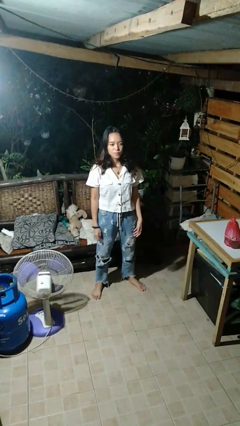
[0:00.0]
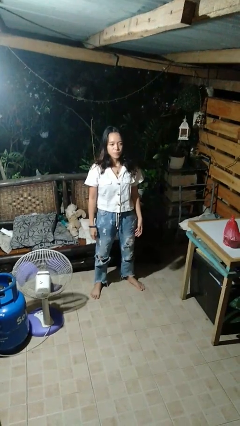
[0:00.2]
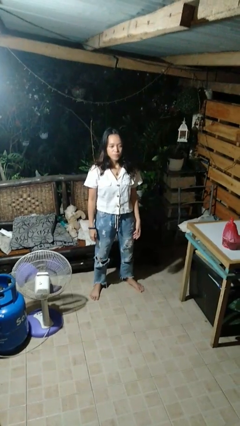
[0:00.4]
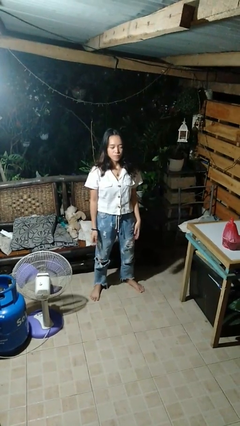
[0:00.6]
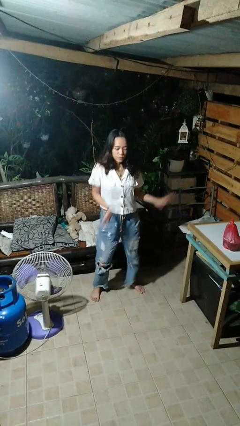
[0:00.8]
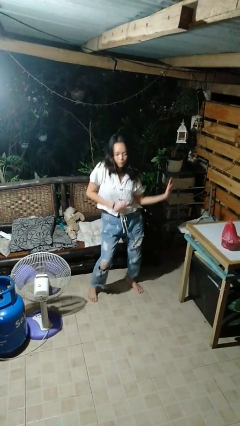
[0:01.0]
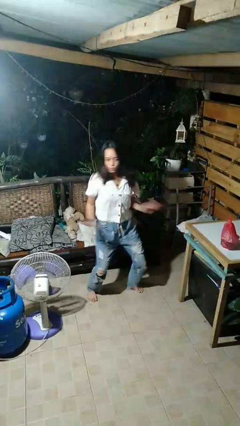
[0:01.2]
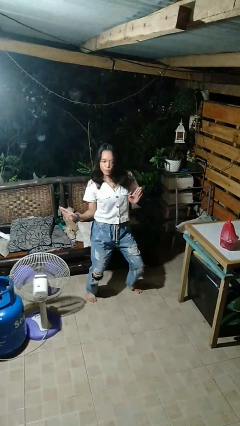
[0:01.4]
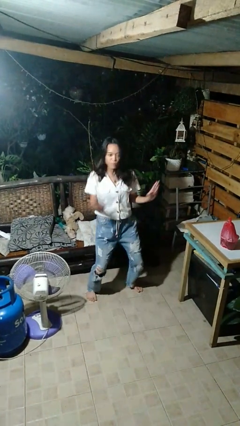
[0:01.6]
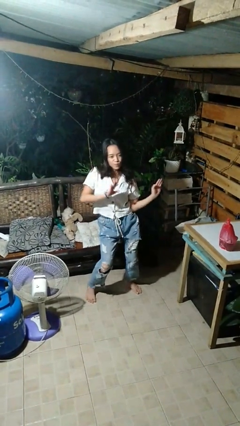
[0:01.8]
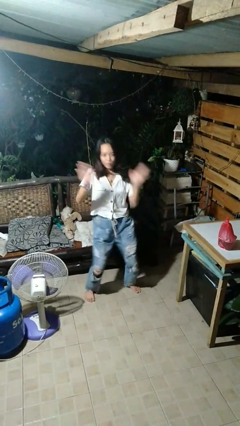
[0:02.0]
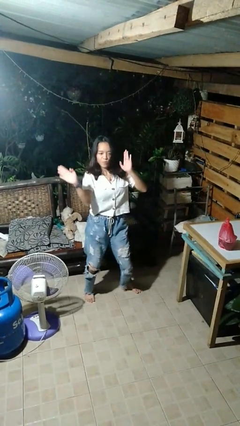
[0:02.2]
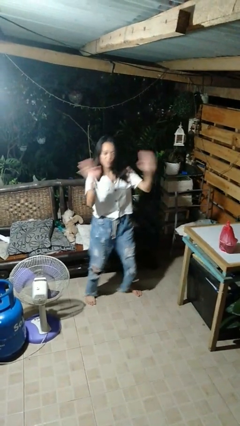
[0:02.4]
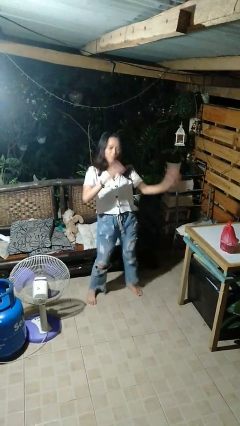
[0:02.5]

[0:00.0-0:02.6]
person dances in place

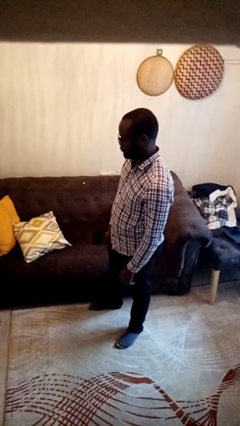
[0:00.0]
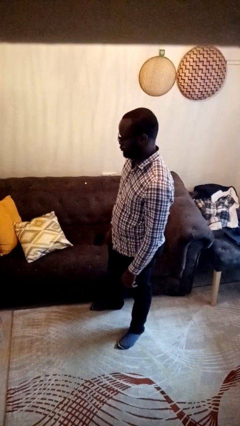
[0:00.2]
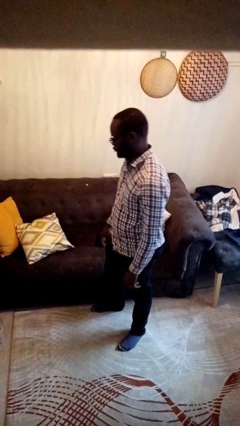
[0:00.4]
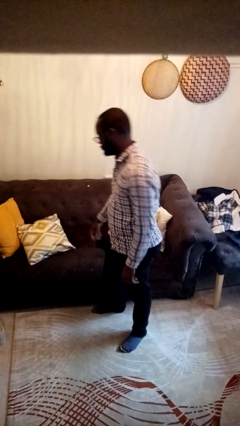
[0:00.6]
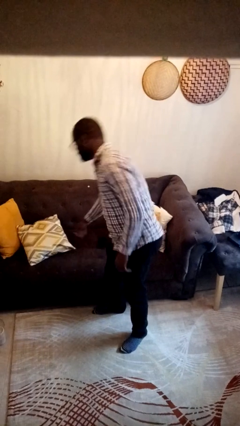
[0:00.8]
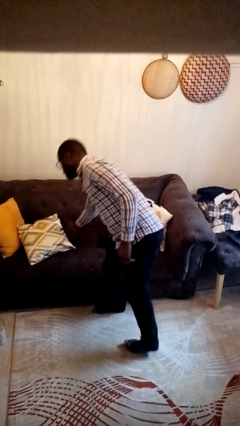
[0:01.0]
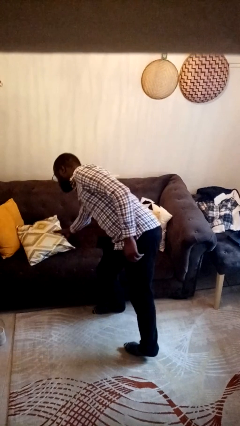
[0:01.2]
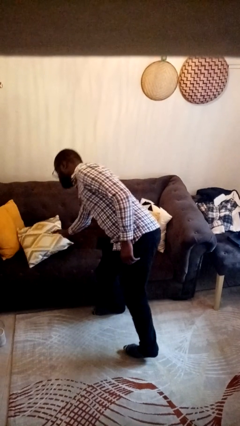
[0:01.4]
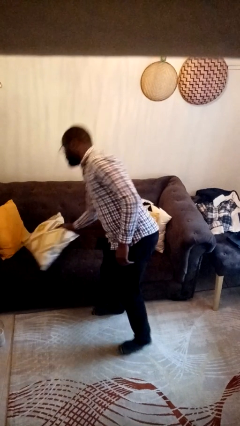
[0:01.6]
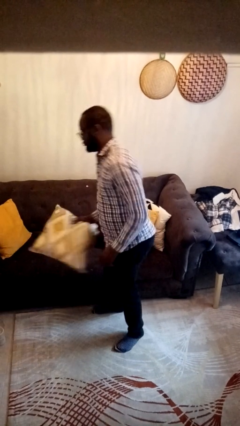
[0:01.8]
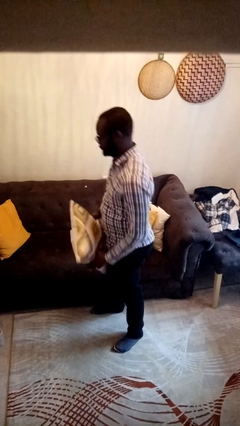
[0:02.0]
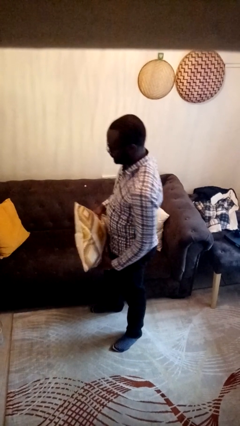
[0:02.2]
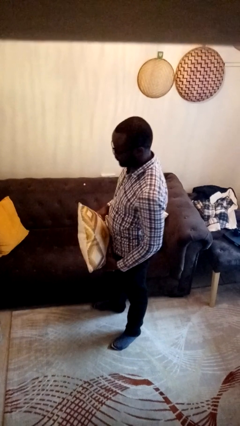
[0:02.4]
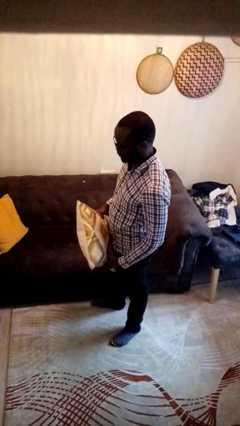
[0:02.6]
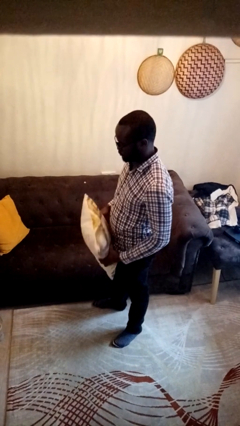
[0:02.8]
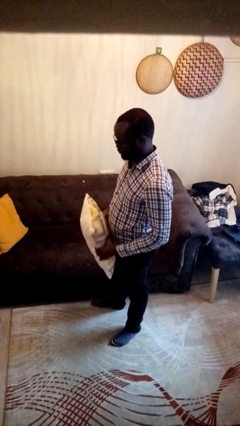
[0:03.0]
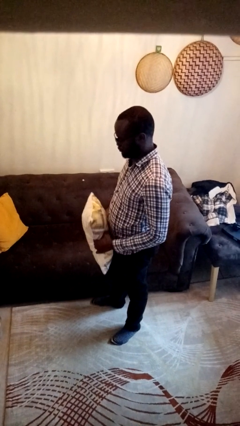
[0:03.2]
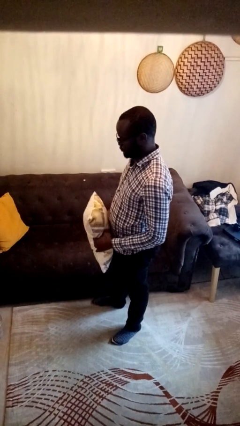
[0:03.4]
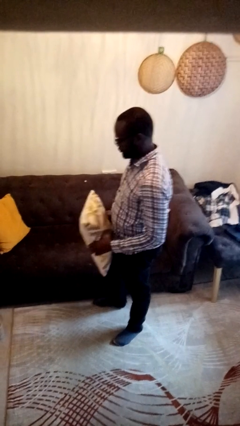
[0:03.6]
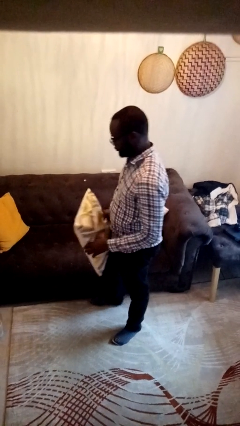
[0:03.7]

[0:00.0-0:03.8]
person picks up object from couch

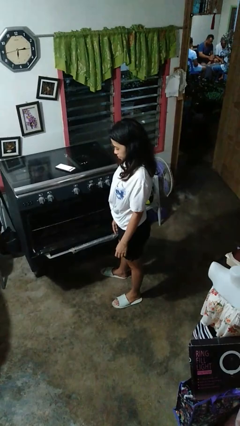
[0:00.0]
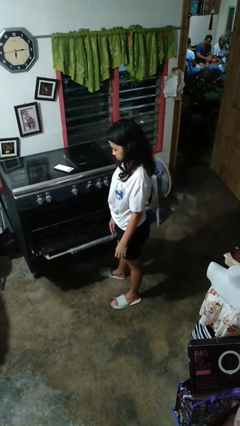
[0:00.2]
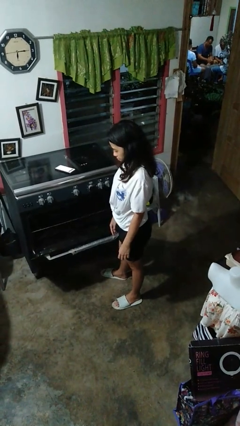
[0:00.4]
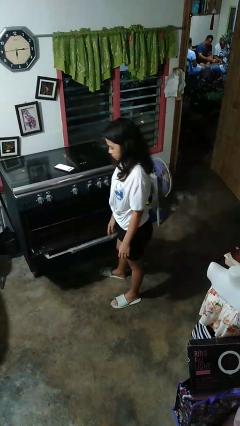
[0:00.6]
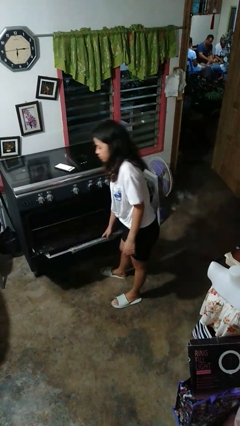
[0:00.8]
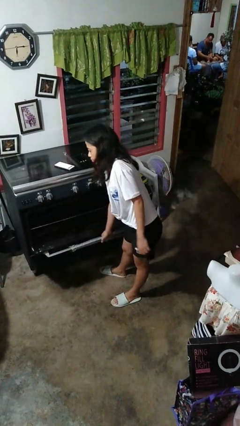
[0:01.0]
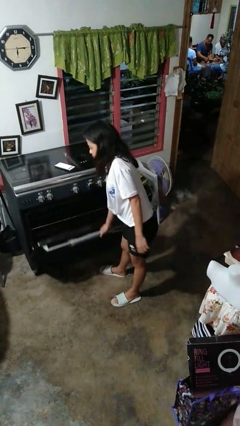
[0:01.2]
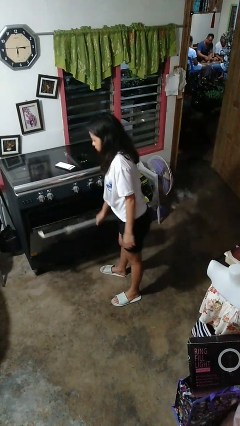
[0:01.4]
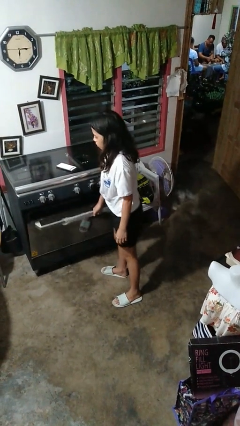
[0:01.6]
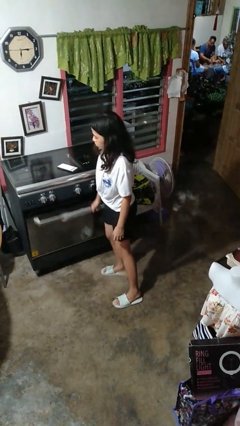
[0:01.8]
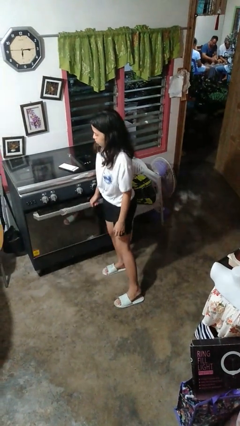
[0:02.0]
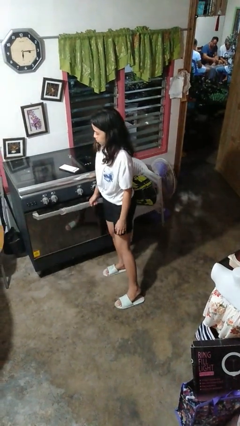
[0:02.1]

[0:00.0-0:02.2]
person closes oven door

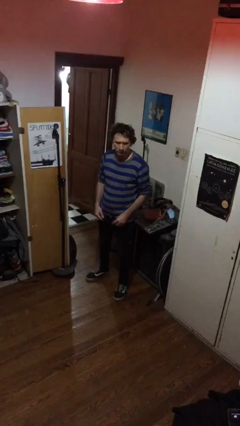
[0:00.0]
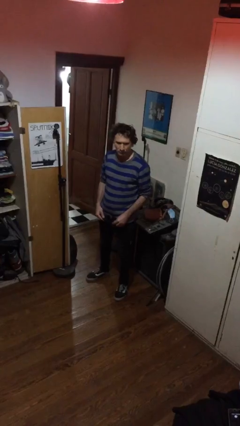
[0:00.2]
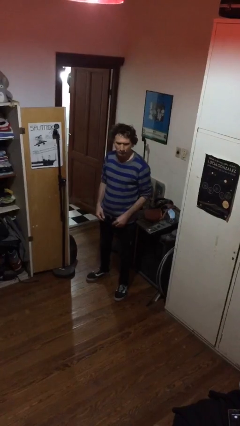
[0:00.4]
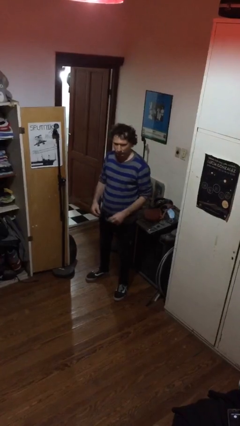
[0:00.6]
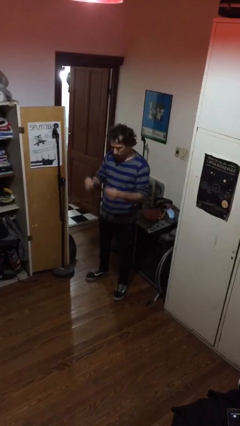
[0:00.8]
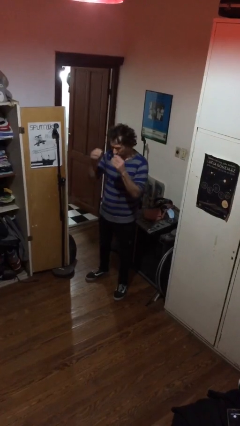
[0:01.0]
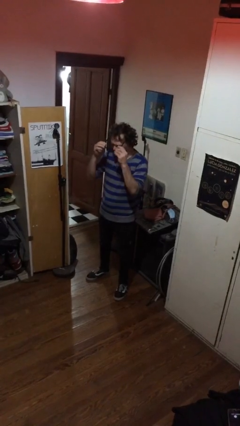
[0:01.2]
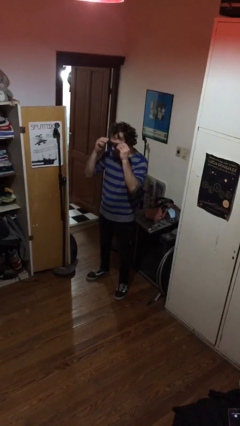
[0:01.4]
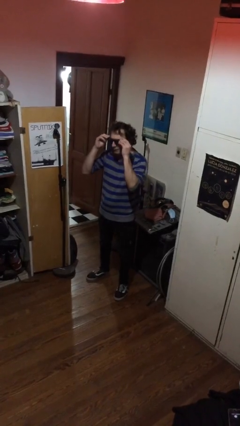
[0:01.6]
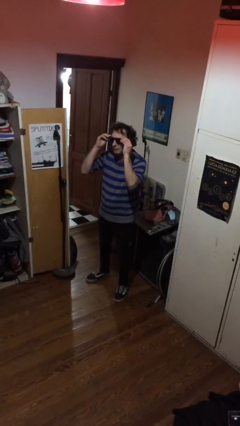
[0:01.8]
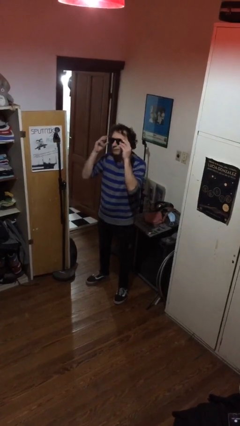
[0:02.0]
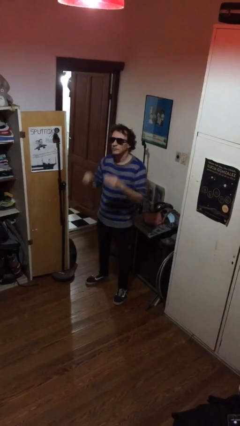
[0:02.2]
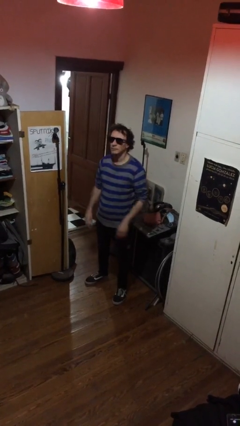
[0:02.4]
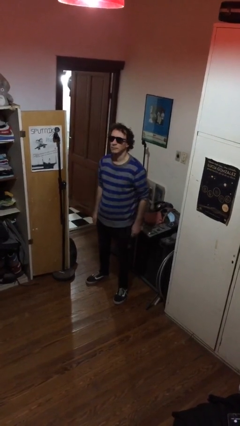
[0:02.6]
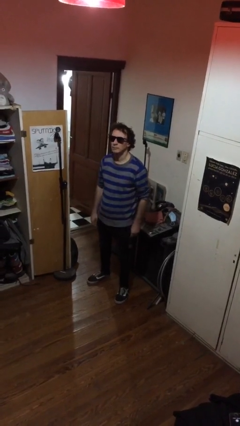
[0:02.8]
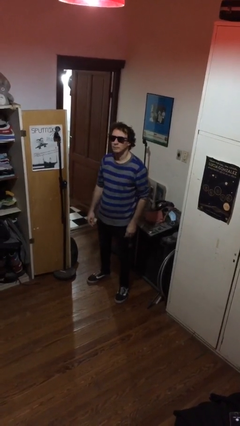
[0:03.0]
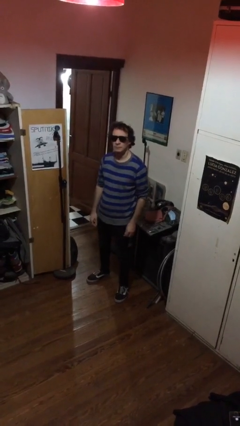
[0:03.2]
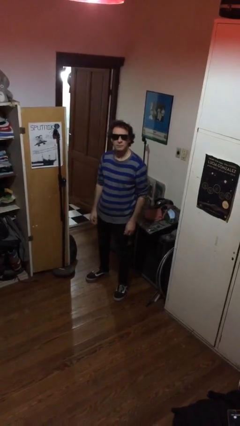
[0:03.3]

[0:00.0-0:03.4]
person puts on sunglasses

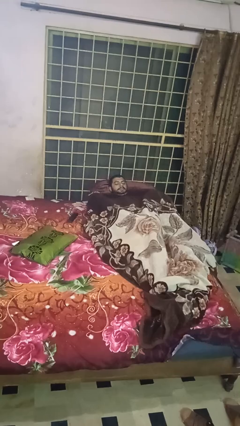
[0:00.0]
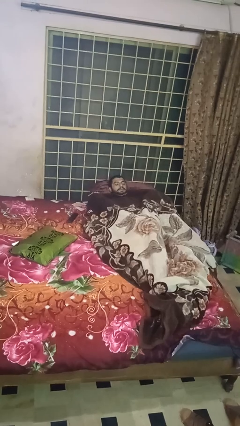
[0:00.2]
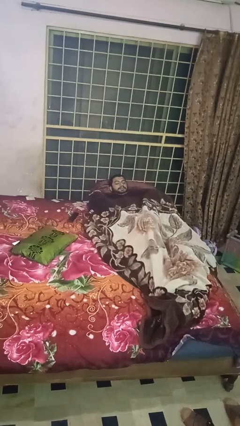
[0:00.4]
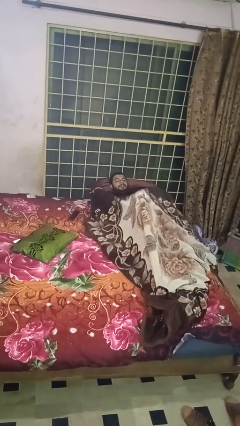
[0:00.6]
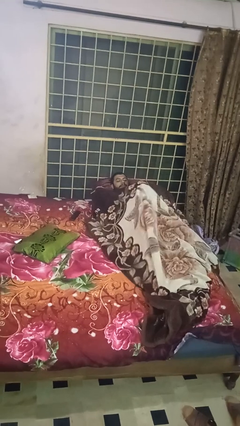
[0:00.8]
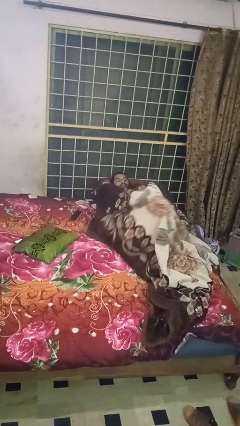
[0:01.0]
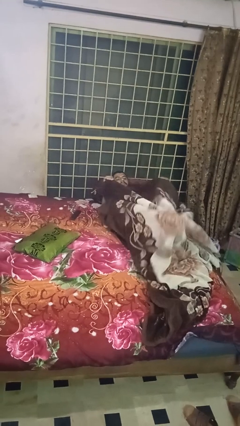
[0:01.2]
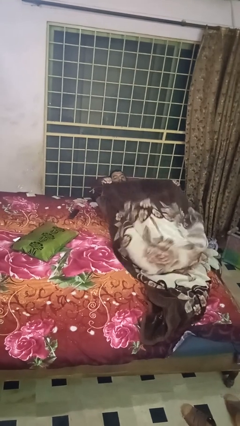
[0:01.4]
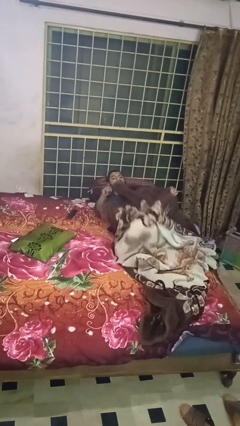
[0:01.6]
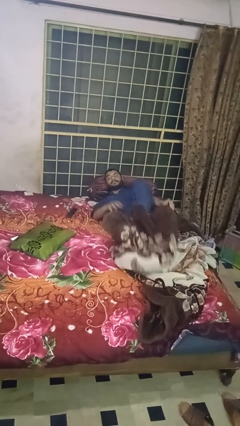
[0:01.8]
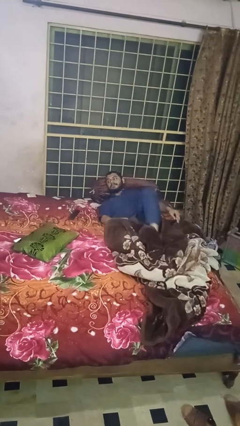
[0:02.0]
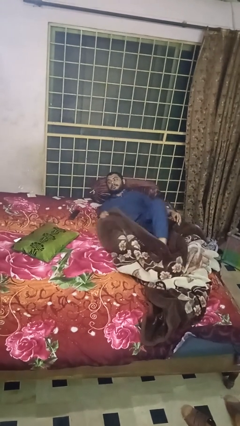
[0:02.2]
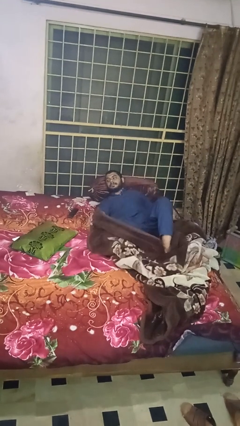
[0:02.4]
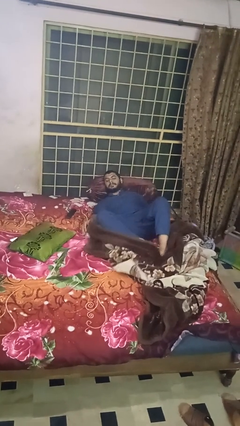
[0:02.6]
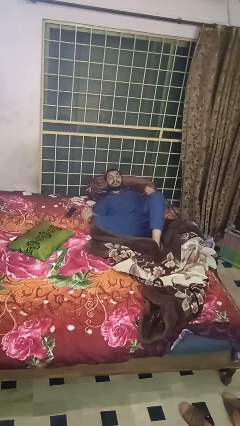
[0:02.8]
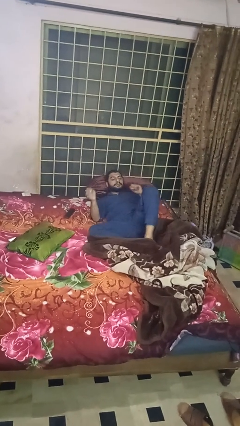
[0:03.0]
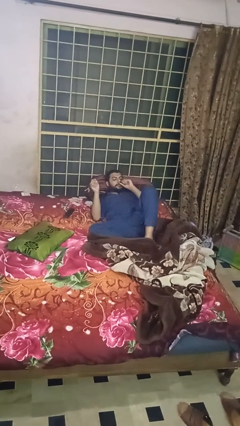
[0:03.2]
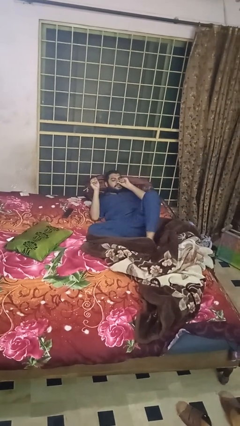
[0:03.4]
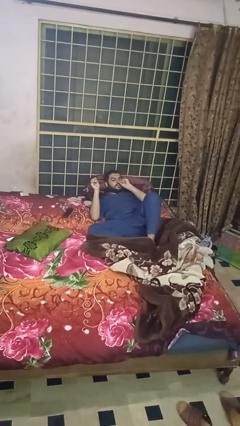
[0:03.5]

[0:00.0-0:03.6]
person uncovers with blanket

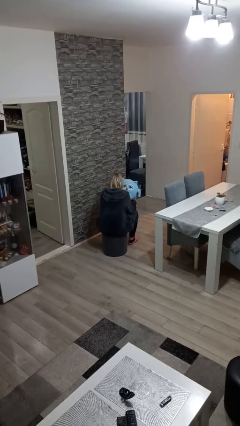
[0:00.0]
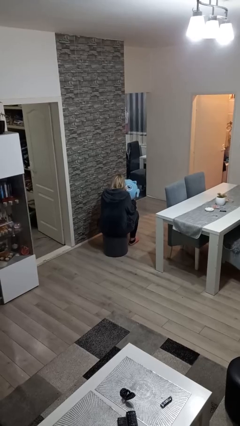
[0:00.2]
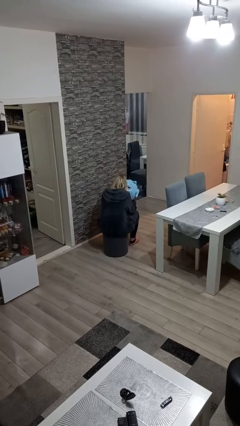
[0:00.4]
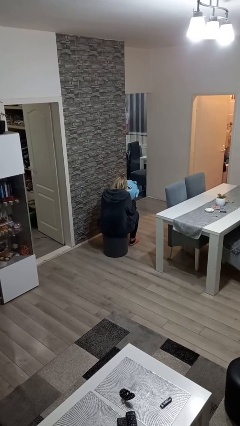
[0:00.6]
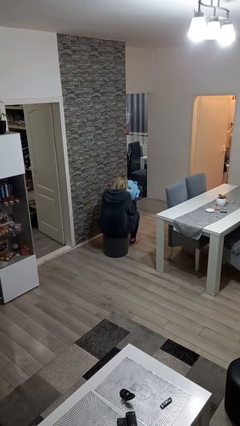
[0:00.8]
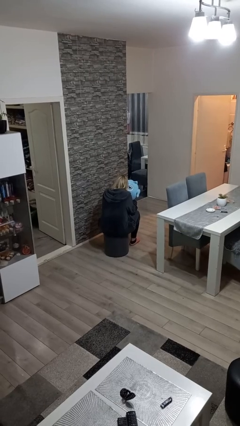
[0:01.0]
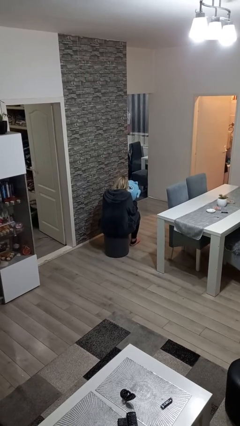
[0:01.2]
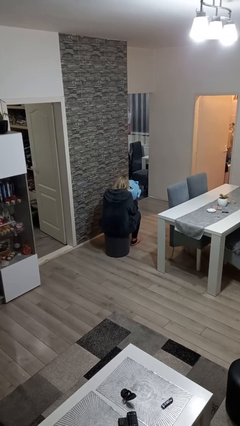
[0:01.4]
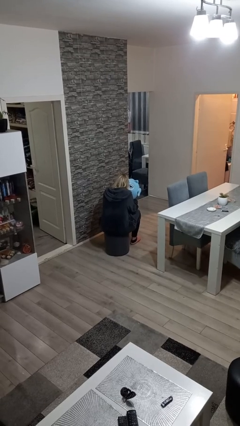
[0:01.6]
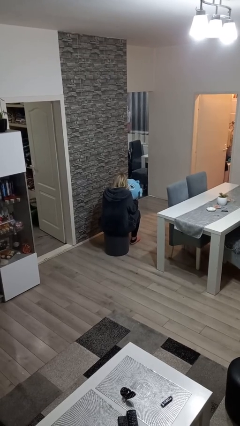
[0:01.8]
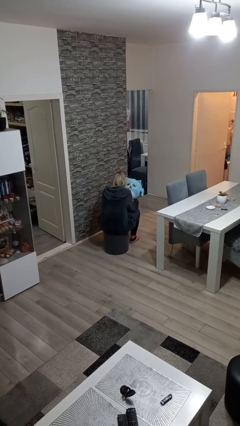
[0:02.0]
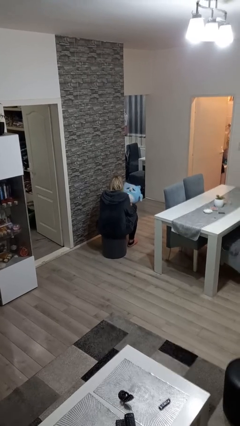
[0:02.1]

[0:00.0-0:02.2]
person hugs stuffed animal
